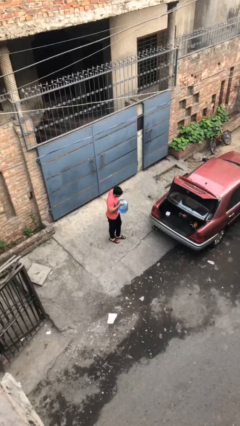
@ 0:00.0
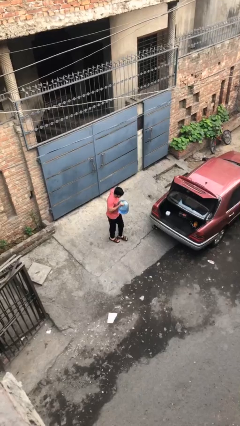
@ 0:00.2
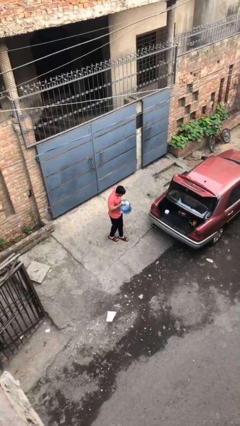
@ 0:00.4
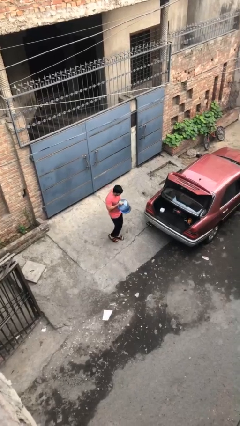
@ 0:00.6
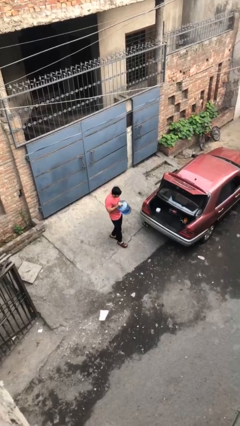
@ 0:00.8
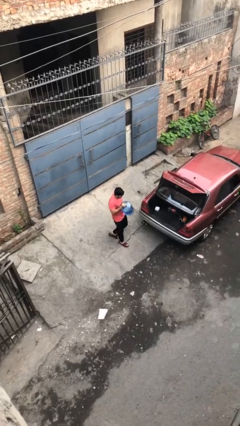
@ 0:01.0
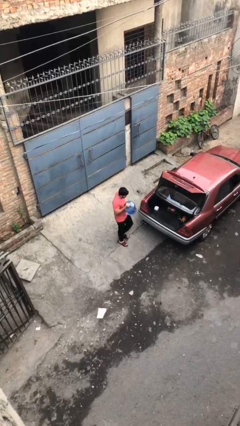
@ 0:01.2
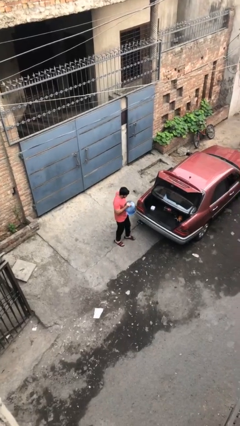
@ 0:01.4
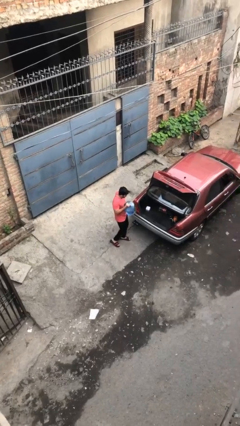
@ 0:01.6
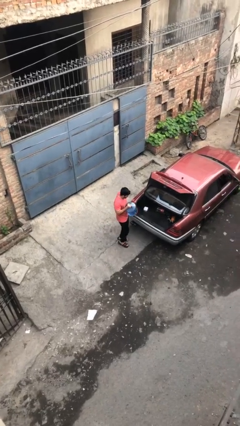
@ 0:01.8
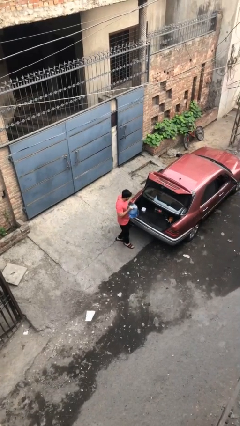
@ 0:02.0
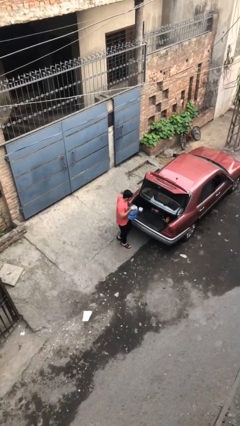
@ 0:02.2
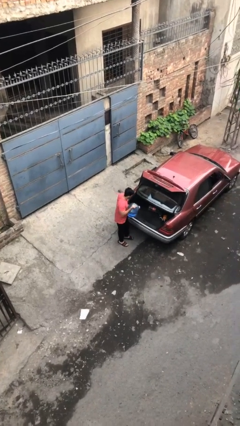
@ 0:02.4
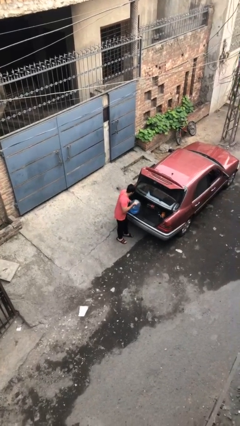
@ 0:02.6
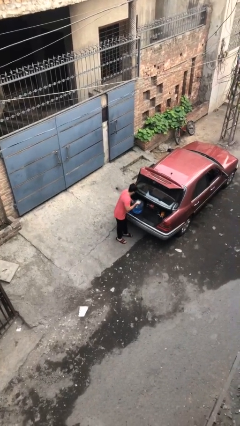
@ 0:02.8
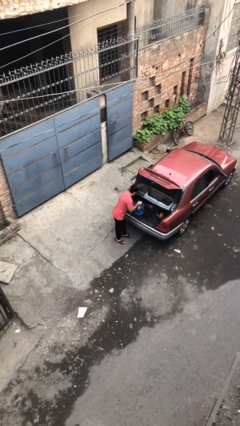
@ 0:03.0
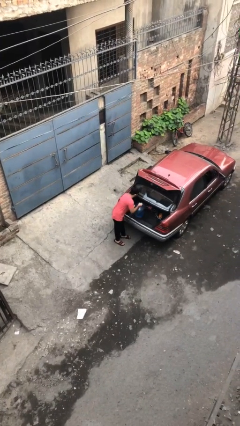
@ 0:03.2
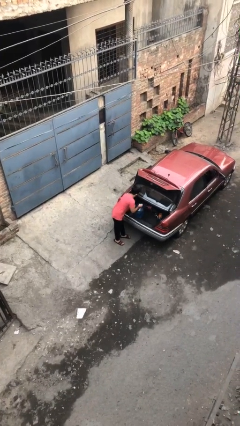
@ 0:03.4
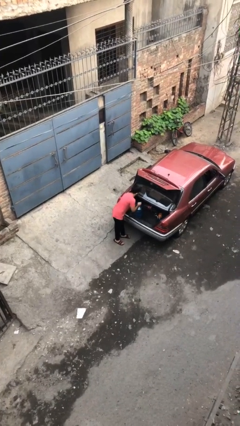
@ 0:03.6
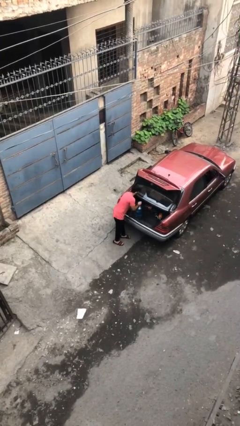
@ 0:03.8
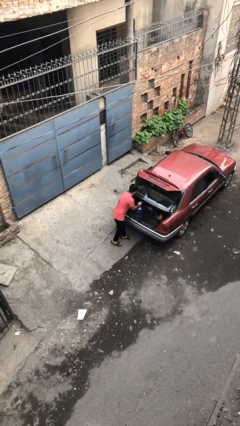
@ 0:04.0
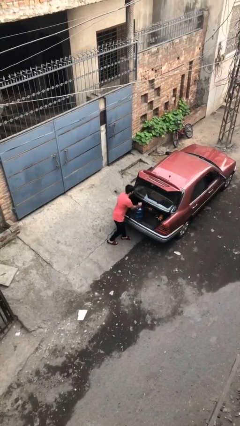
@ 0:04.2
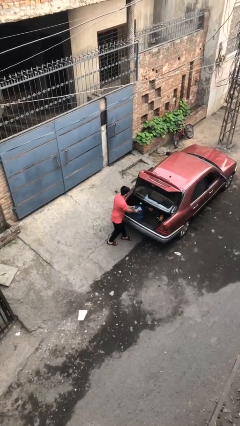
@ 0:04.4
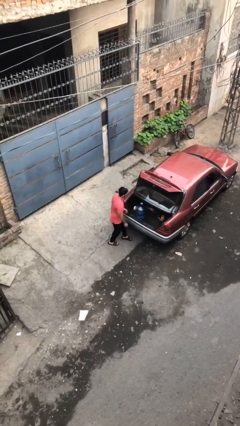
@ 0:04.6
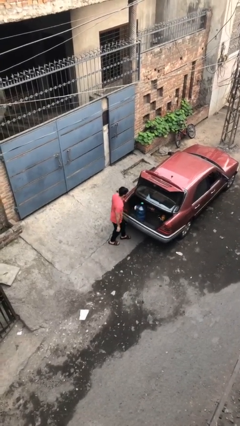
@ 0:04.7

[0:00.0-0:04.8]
person loads car

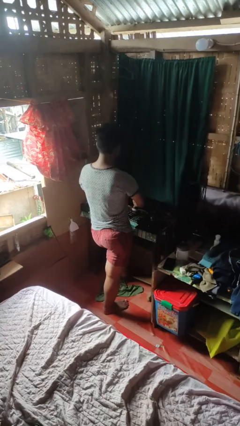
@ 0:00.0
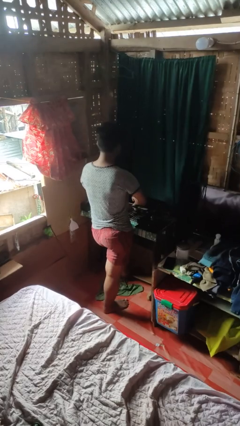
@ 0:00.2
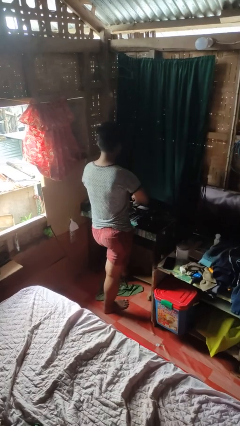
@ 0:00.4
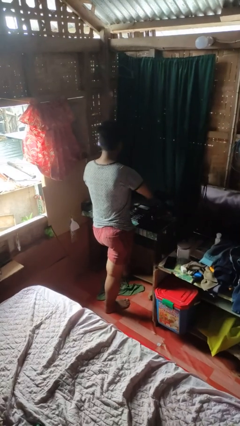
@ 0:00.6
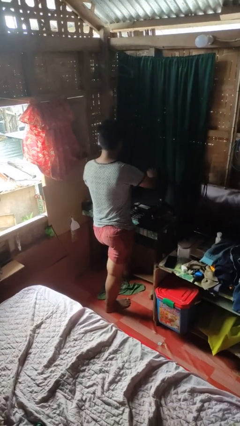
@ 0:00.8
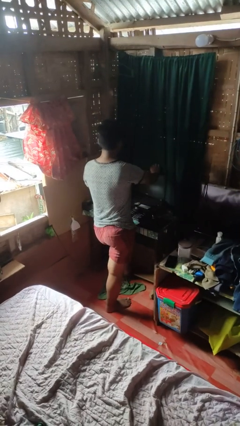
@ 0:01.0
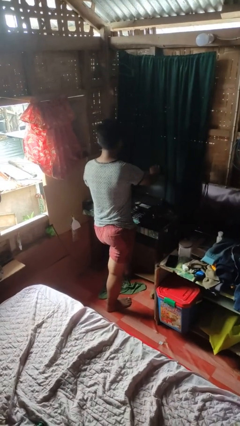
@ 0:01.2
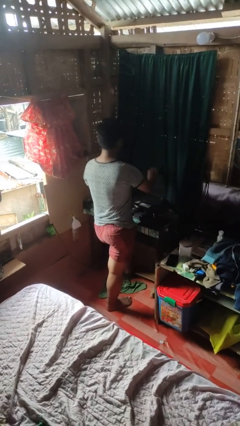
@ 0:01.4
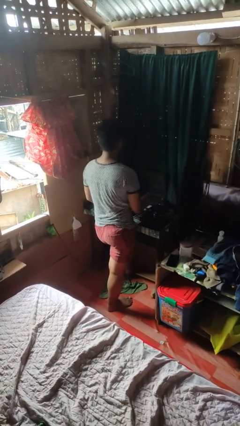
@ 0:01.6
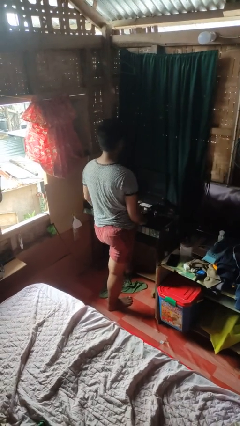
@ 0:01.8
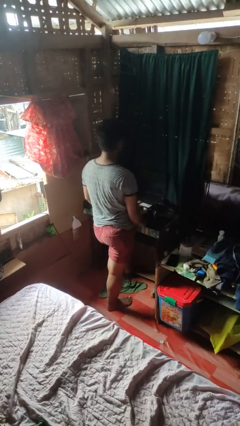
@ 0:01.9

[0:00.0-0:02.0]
person opens laptop

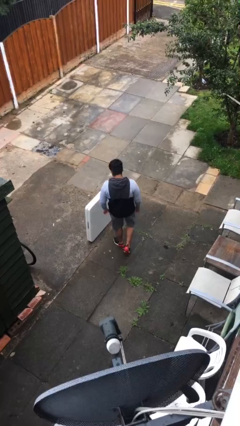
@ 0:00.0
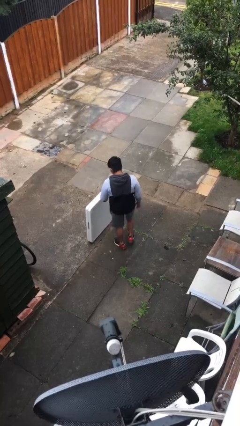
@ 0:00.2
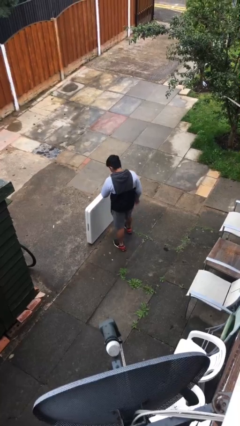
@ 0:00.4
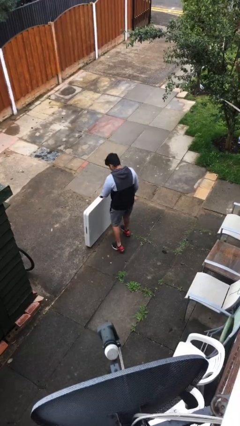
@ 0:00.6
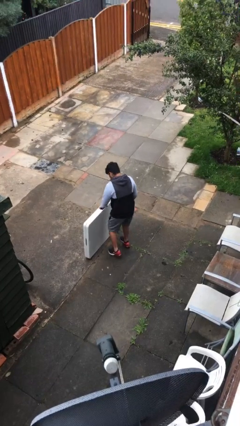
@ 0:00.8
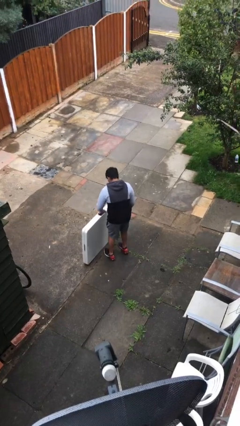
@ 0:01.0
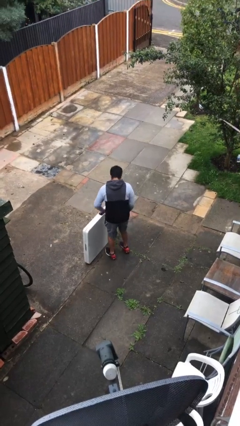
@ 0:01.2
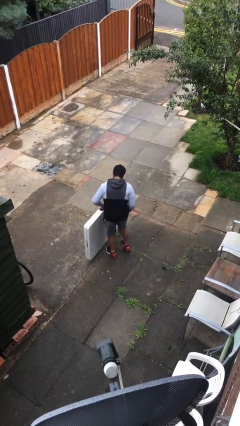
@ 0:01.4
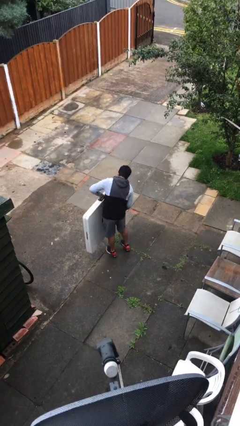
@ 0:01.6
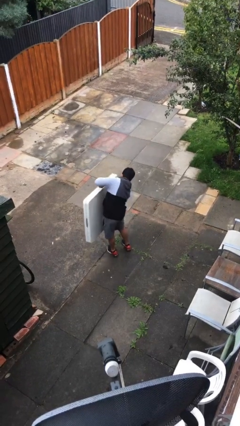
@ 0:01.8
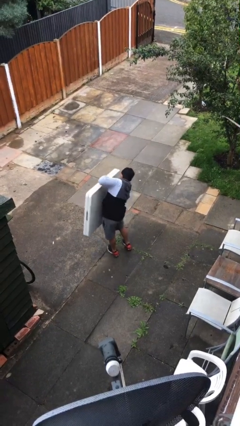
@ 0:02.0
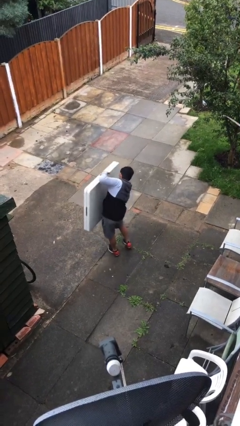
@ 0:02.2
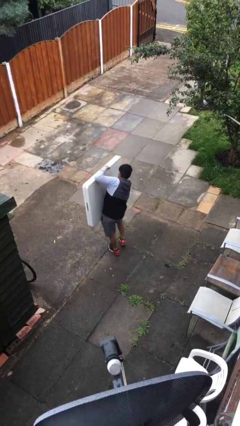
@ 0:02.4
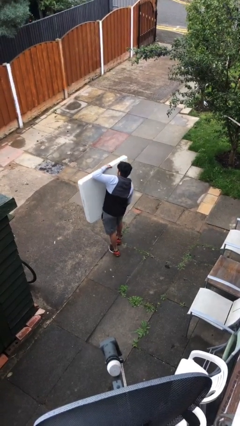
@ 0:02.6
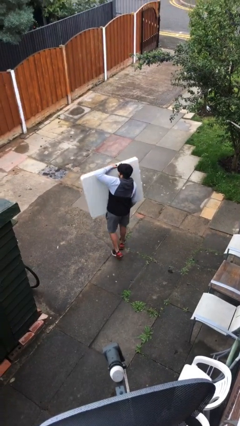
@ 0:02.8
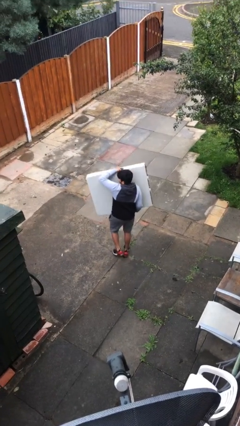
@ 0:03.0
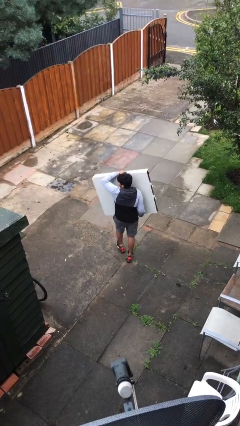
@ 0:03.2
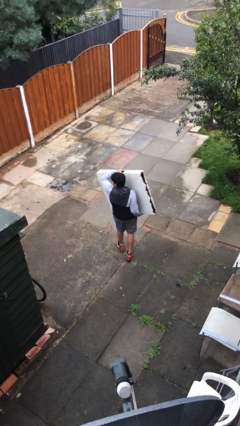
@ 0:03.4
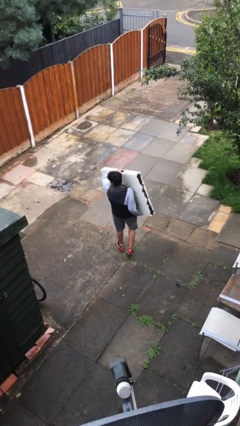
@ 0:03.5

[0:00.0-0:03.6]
person picks up object from floor

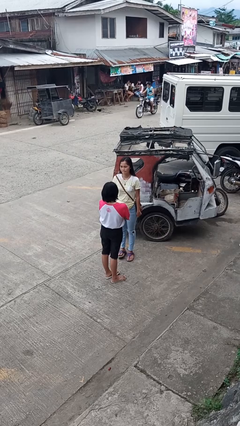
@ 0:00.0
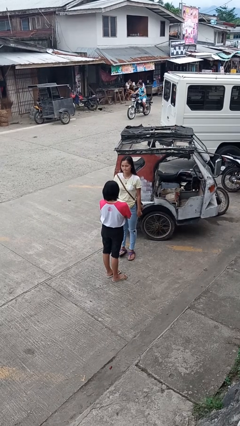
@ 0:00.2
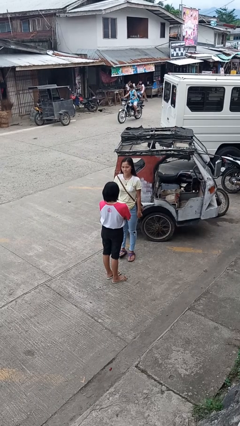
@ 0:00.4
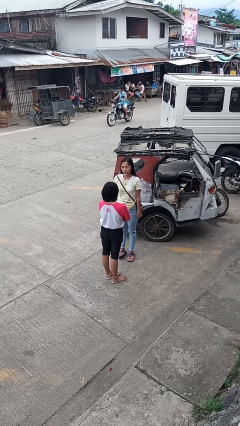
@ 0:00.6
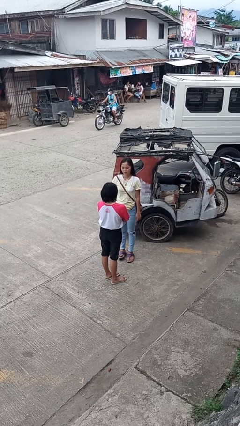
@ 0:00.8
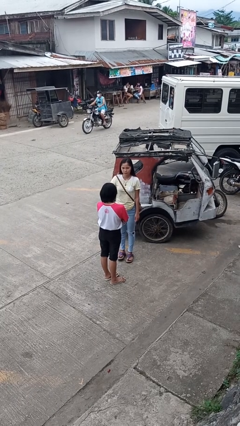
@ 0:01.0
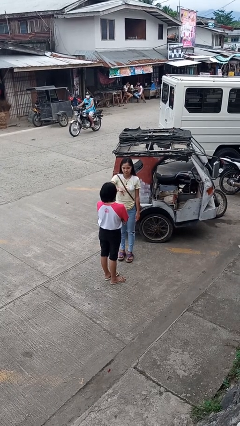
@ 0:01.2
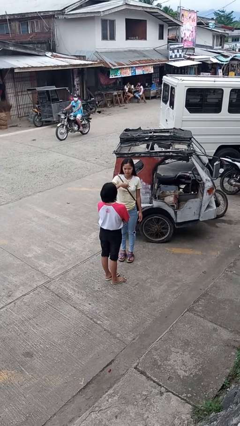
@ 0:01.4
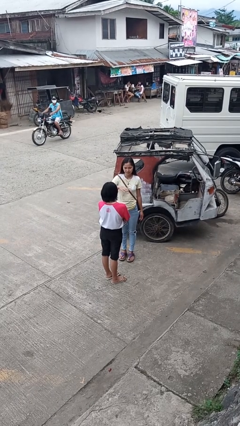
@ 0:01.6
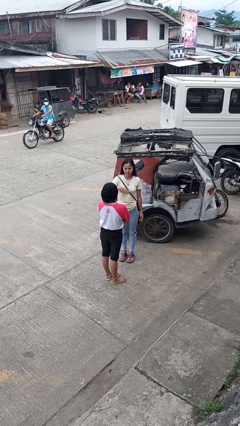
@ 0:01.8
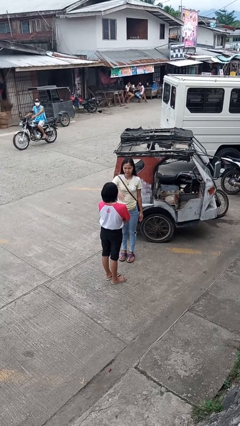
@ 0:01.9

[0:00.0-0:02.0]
person shoves person

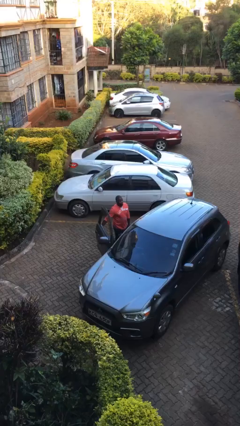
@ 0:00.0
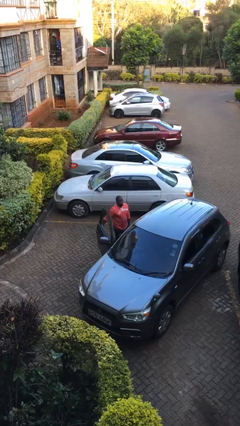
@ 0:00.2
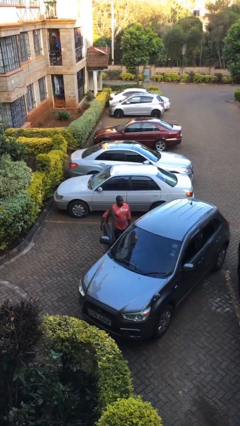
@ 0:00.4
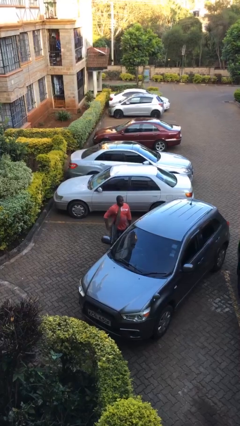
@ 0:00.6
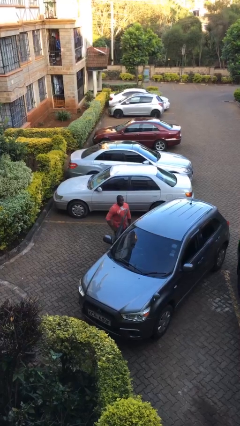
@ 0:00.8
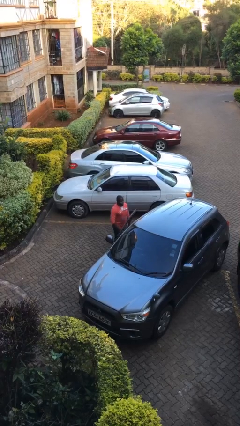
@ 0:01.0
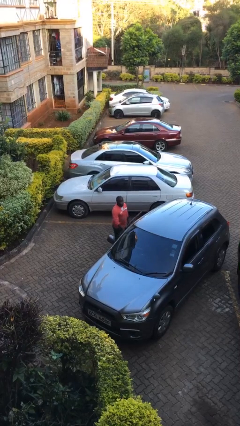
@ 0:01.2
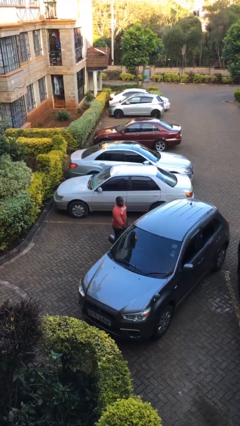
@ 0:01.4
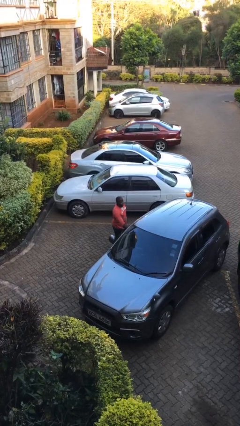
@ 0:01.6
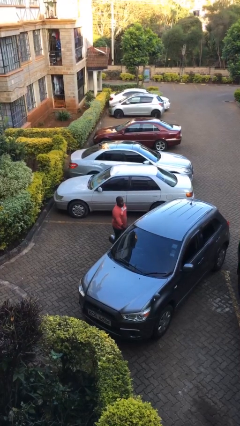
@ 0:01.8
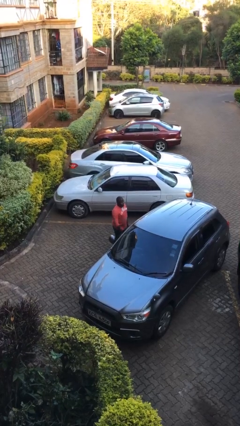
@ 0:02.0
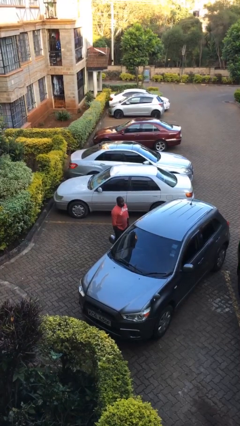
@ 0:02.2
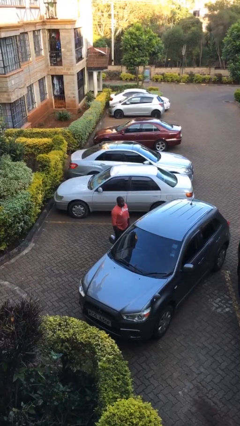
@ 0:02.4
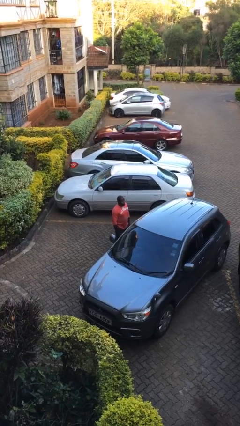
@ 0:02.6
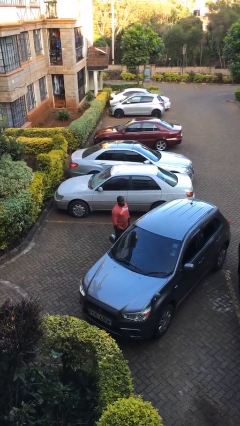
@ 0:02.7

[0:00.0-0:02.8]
person closes car door

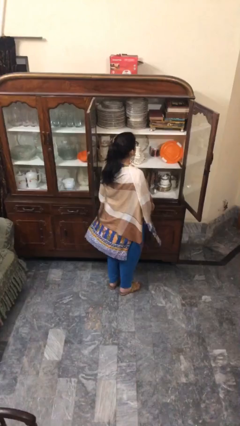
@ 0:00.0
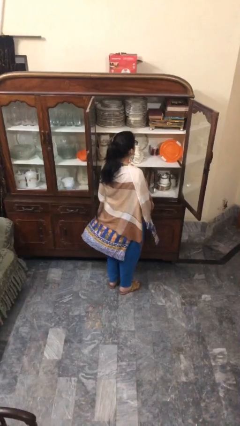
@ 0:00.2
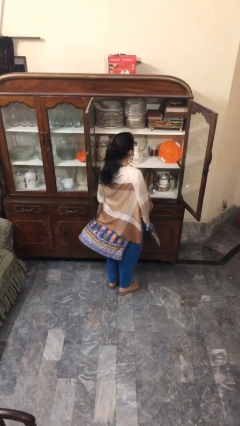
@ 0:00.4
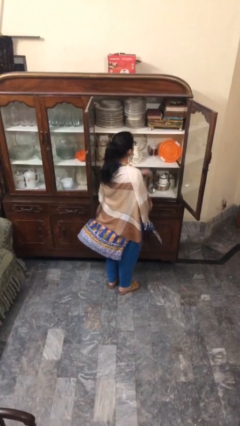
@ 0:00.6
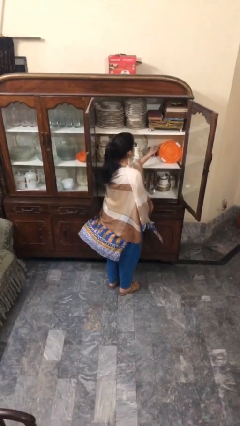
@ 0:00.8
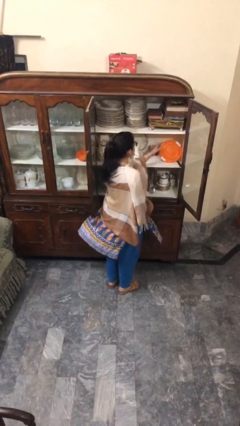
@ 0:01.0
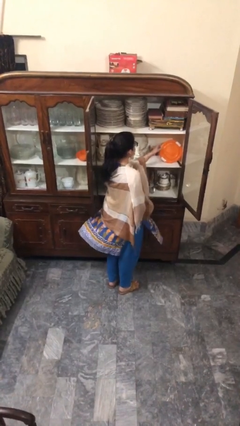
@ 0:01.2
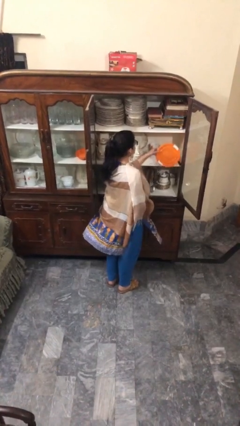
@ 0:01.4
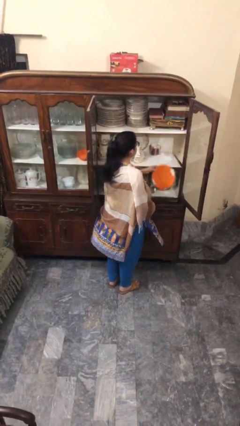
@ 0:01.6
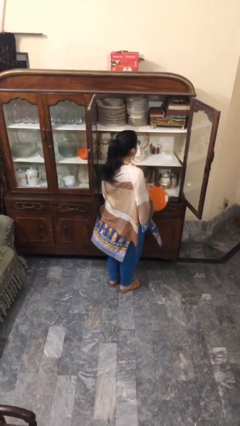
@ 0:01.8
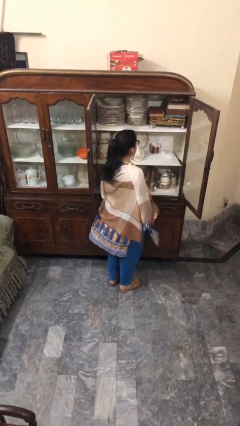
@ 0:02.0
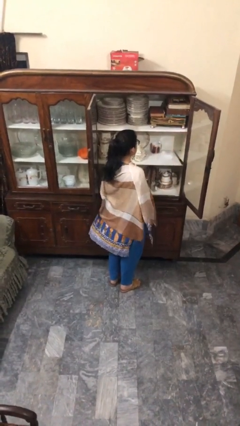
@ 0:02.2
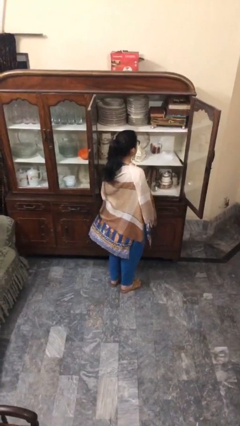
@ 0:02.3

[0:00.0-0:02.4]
person takes object from cabinet
